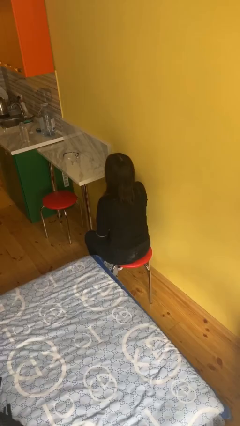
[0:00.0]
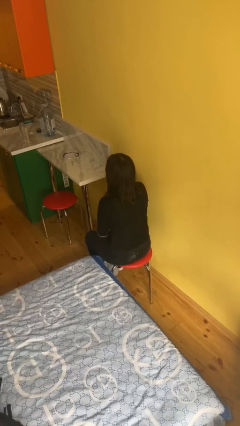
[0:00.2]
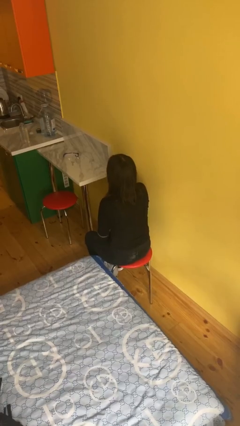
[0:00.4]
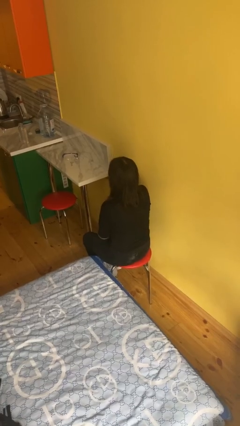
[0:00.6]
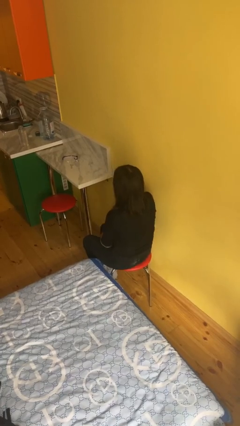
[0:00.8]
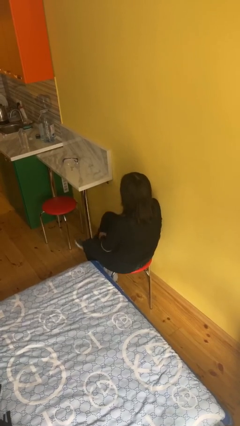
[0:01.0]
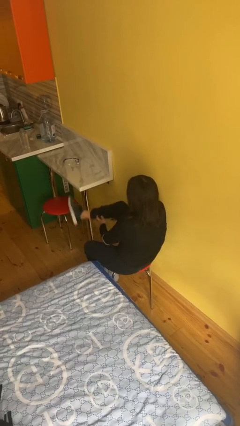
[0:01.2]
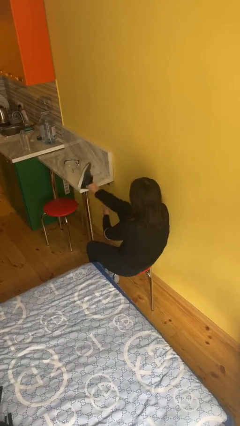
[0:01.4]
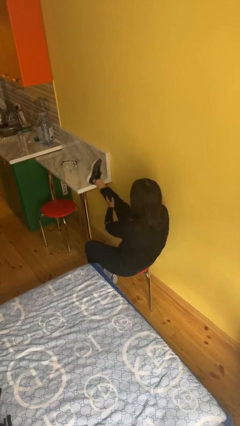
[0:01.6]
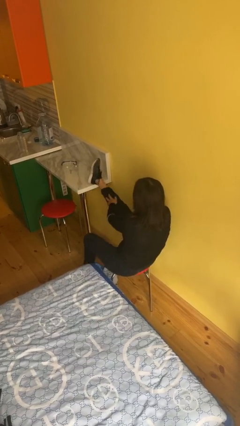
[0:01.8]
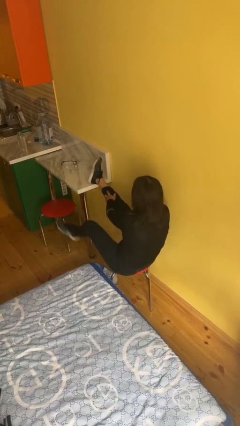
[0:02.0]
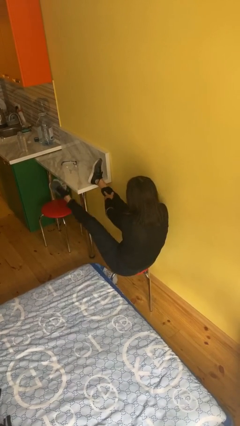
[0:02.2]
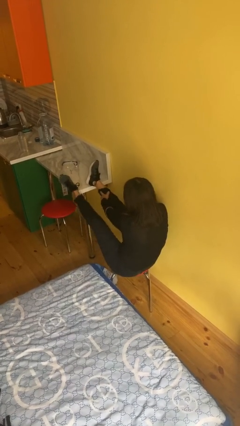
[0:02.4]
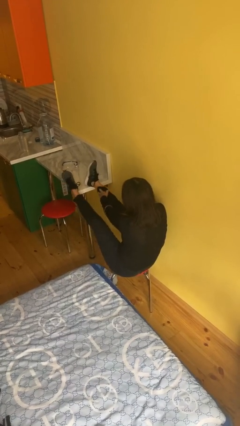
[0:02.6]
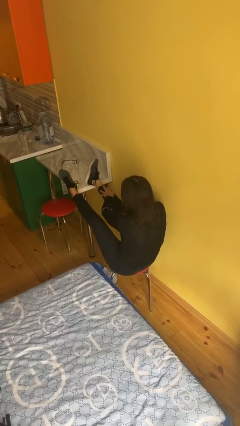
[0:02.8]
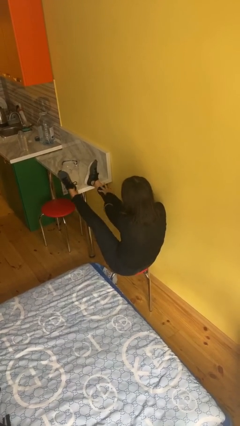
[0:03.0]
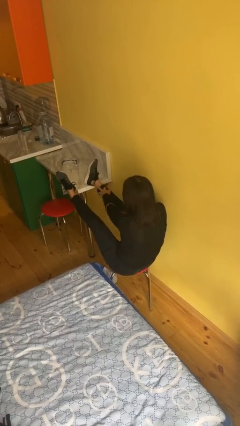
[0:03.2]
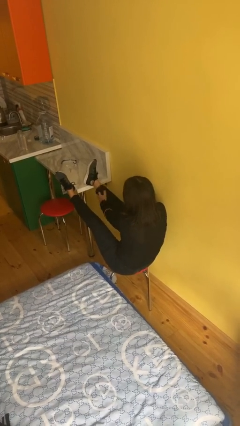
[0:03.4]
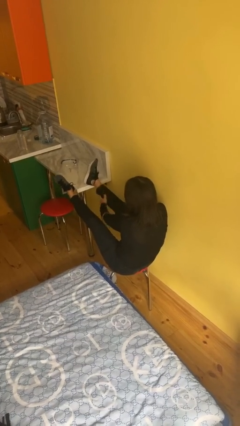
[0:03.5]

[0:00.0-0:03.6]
person puts feet up

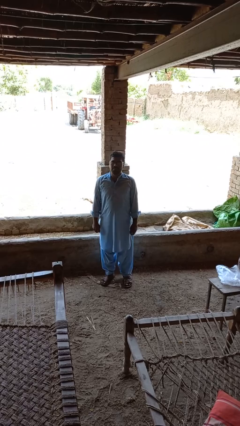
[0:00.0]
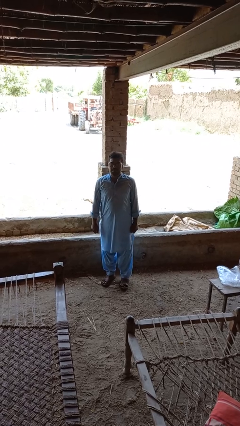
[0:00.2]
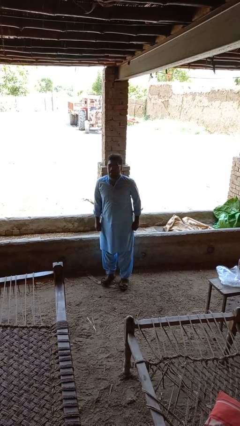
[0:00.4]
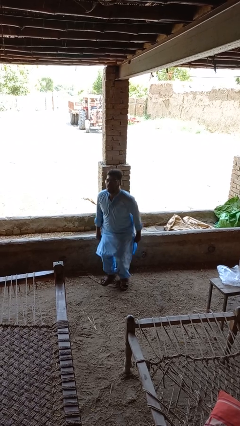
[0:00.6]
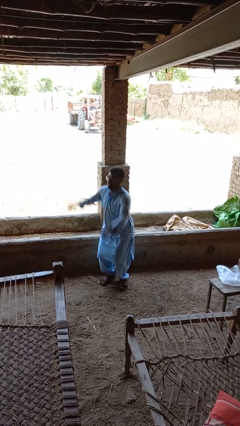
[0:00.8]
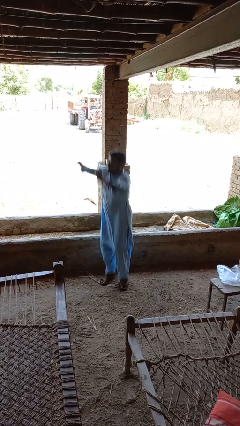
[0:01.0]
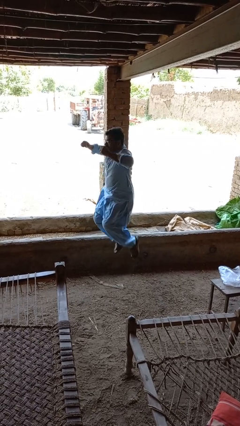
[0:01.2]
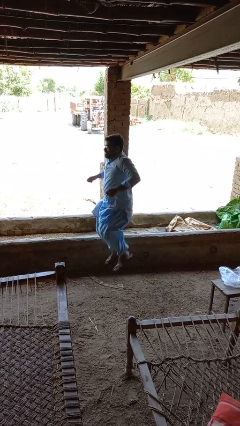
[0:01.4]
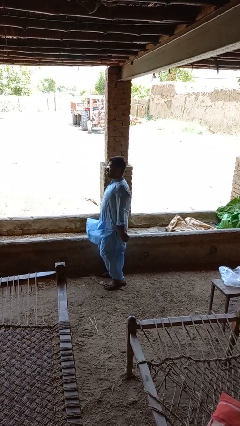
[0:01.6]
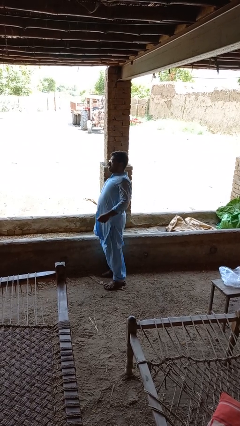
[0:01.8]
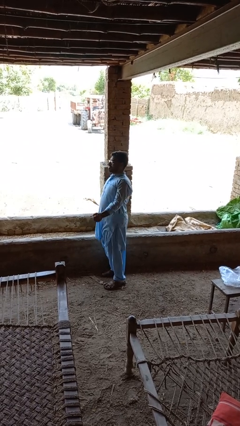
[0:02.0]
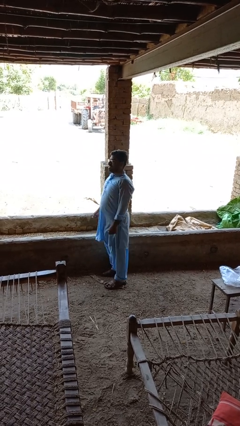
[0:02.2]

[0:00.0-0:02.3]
person jumps

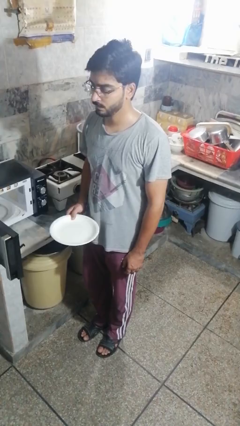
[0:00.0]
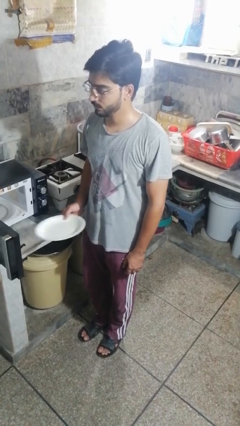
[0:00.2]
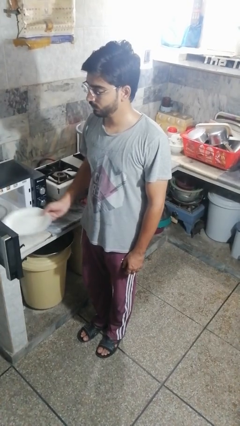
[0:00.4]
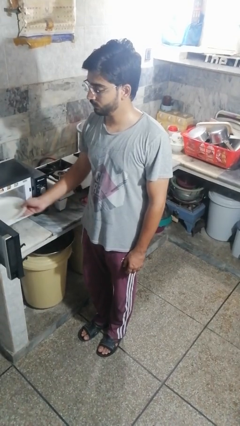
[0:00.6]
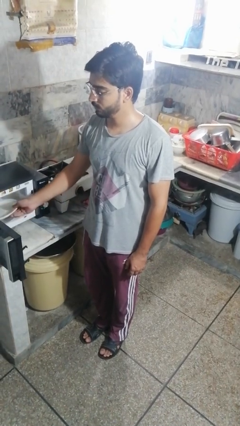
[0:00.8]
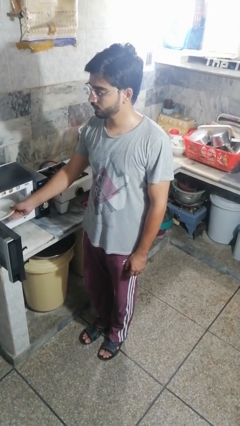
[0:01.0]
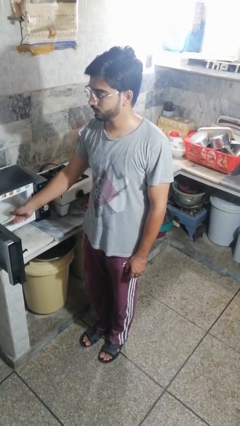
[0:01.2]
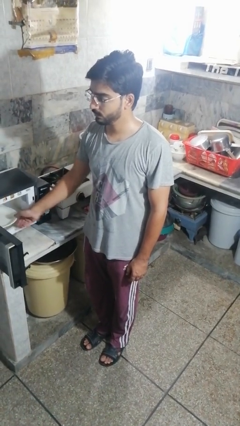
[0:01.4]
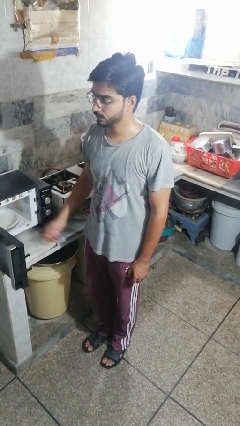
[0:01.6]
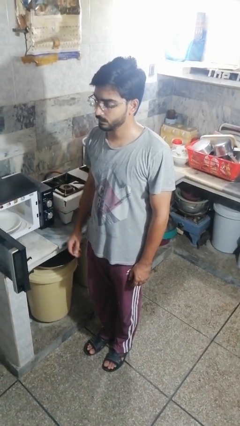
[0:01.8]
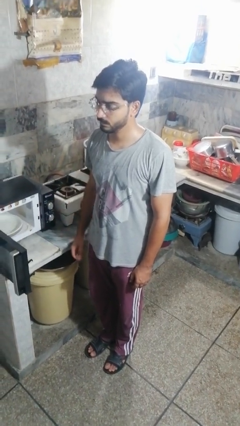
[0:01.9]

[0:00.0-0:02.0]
person puts object into oven

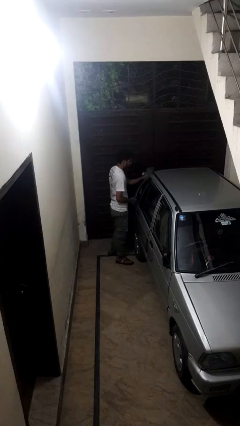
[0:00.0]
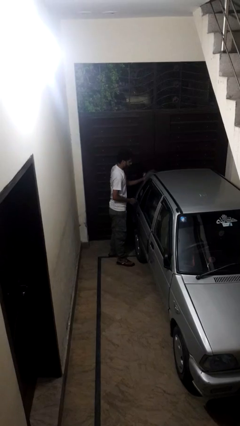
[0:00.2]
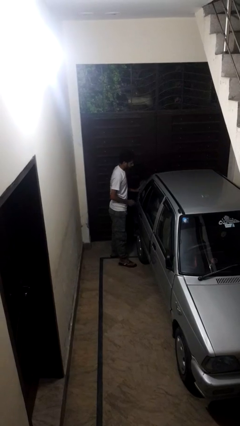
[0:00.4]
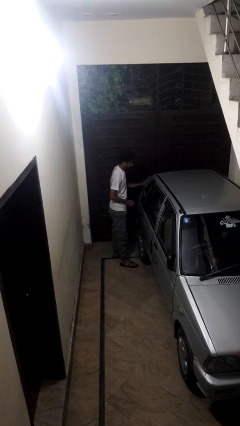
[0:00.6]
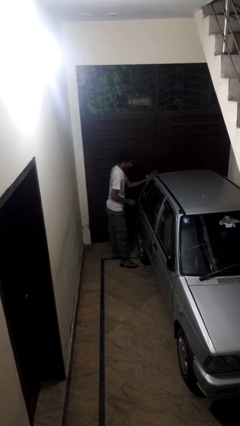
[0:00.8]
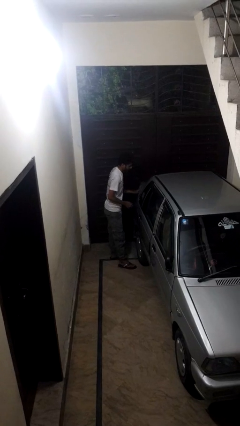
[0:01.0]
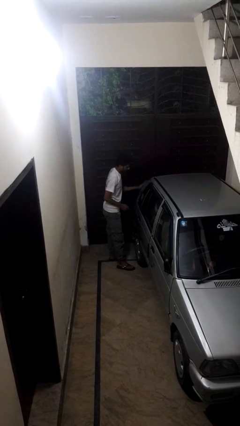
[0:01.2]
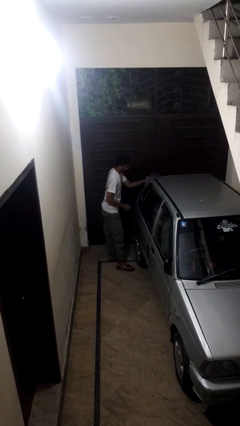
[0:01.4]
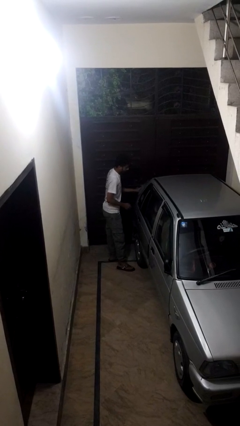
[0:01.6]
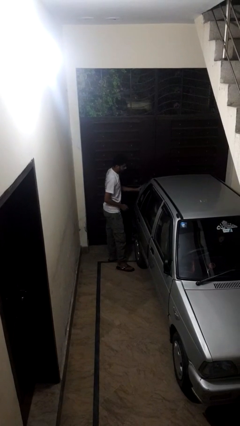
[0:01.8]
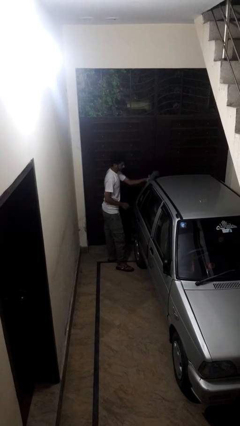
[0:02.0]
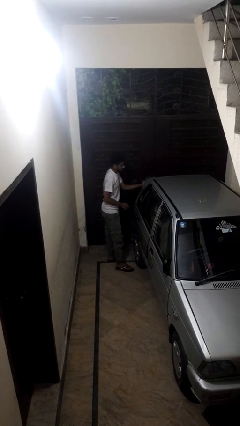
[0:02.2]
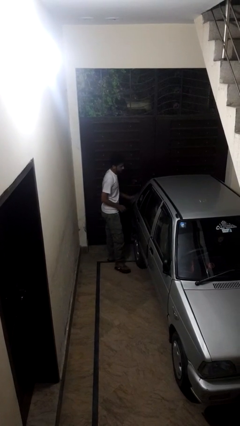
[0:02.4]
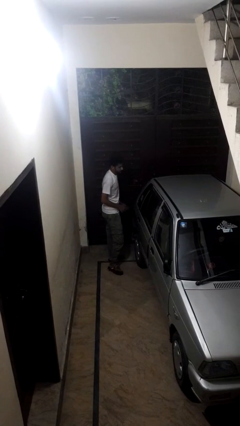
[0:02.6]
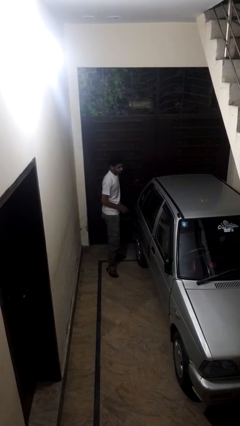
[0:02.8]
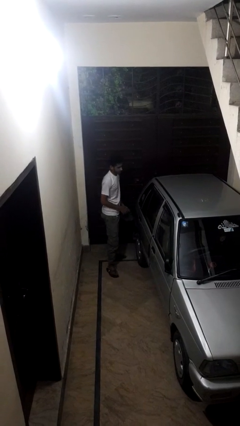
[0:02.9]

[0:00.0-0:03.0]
person polishes car with rag

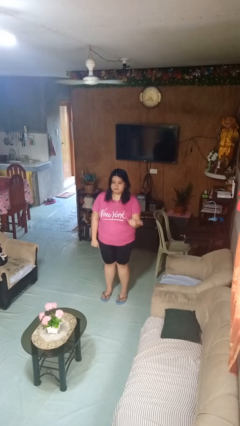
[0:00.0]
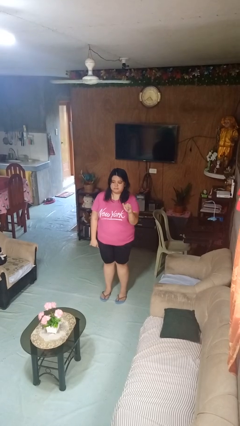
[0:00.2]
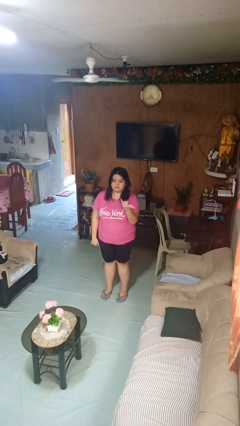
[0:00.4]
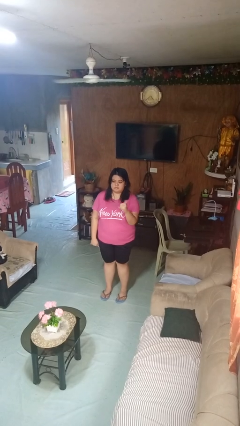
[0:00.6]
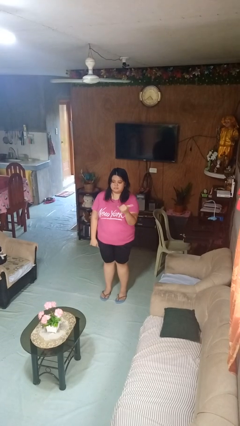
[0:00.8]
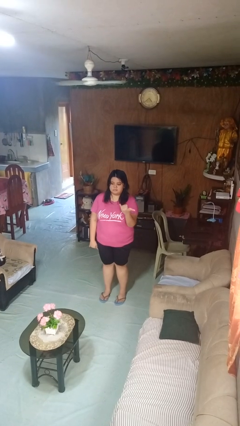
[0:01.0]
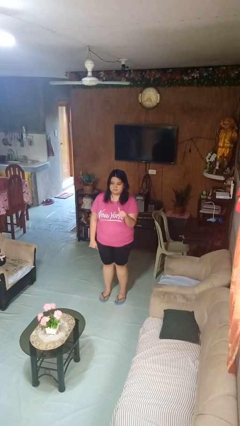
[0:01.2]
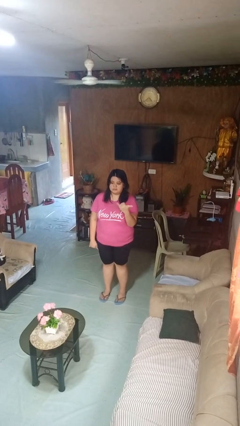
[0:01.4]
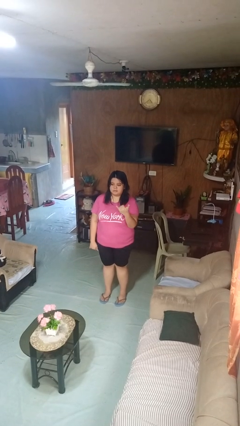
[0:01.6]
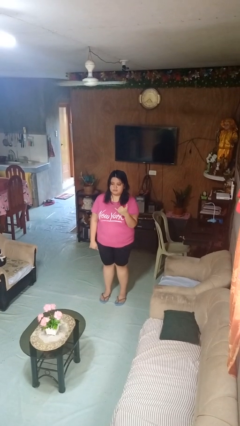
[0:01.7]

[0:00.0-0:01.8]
person gestures hang loose

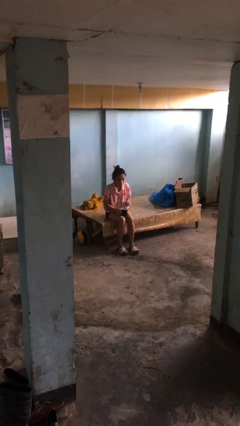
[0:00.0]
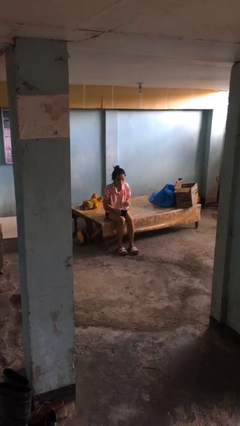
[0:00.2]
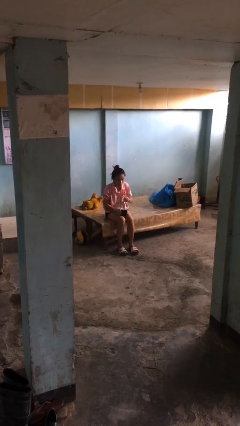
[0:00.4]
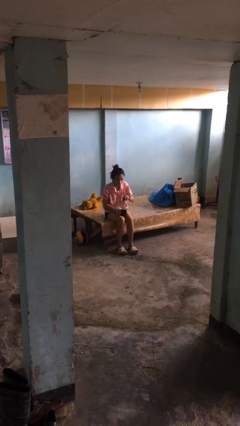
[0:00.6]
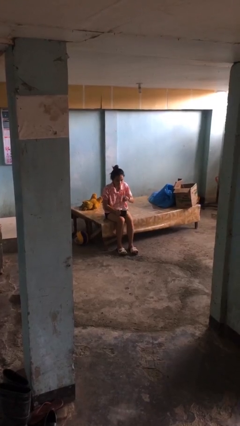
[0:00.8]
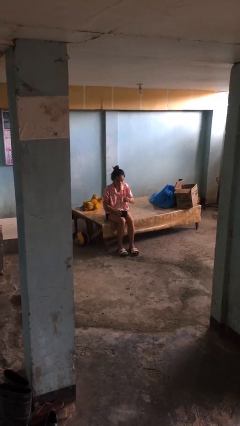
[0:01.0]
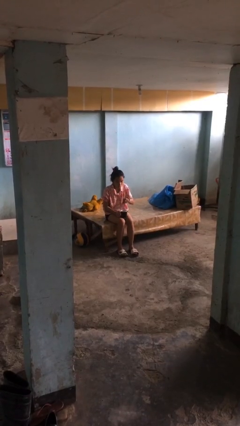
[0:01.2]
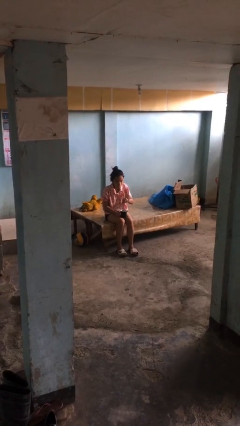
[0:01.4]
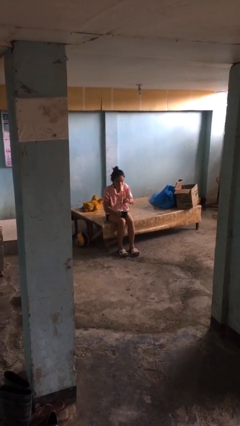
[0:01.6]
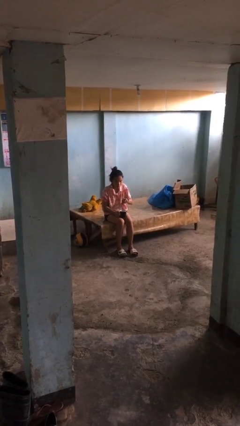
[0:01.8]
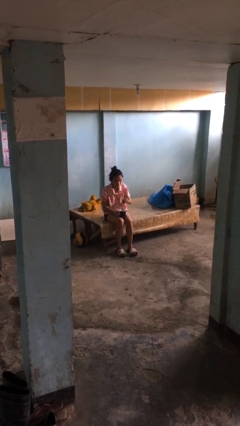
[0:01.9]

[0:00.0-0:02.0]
person stirs mug

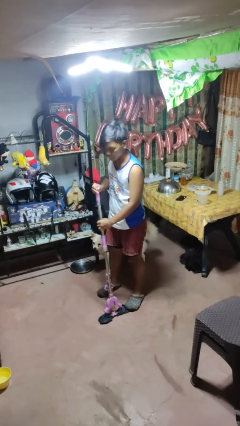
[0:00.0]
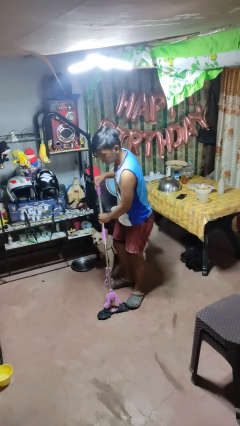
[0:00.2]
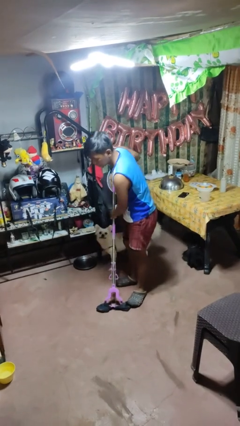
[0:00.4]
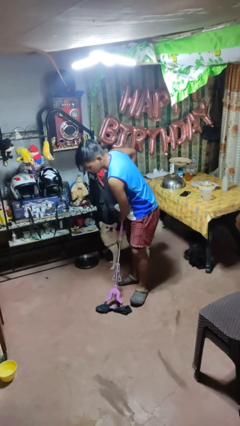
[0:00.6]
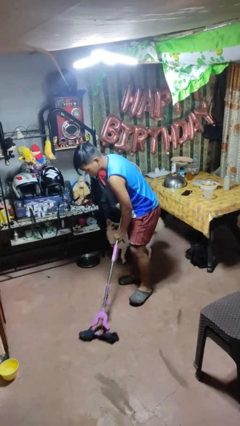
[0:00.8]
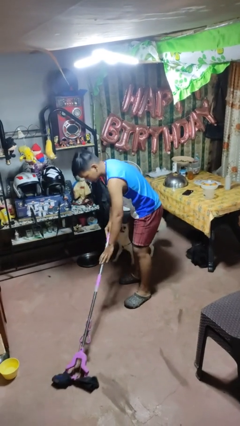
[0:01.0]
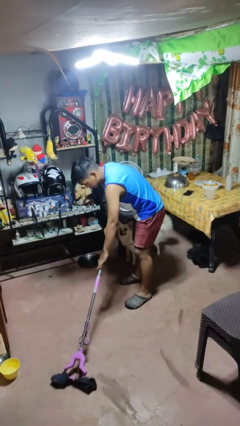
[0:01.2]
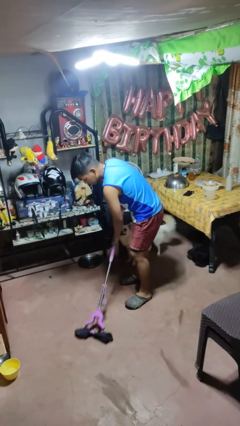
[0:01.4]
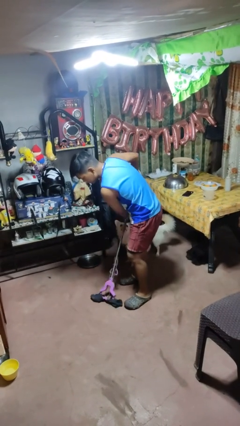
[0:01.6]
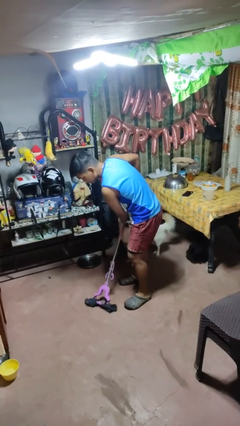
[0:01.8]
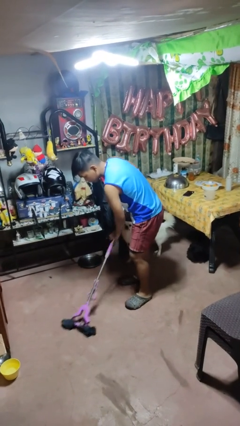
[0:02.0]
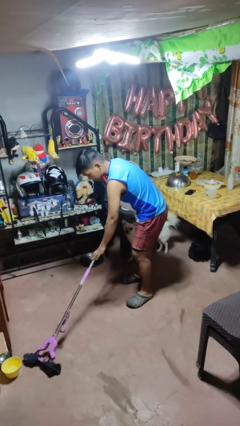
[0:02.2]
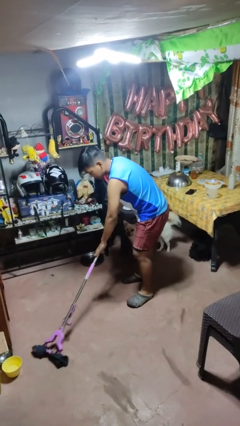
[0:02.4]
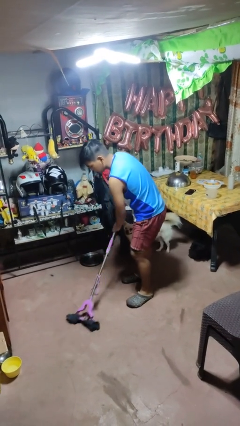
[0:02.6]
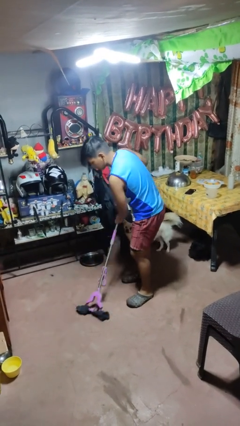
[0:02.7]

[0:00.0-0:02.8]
person mops
